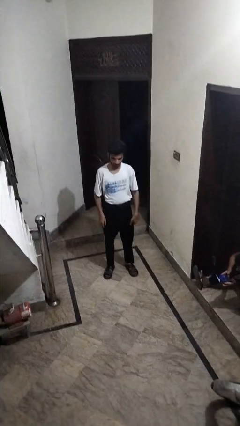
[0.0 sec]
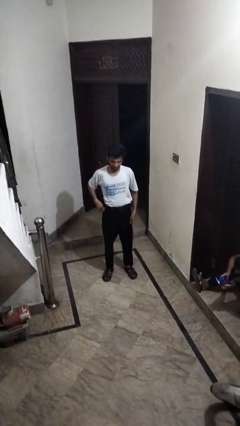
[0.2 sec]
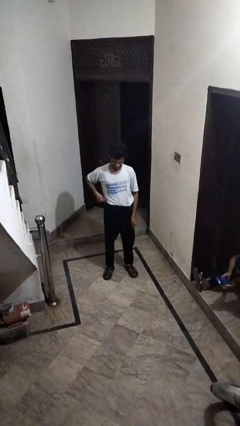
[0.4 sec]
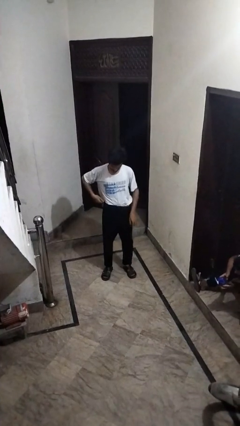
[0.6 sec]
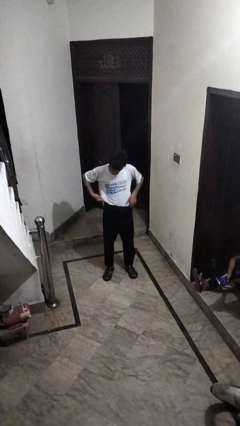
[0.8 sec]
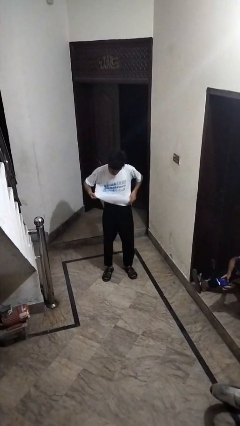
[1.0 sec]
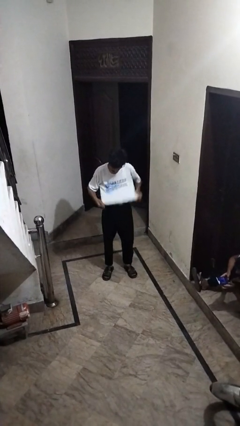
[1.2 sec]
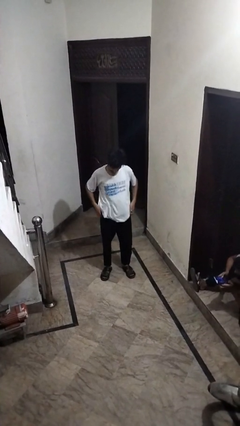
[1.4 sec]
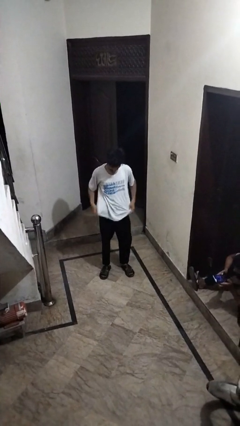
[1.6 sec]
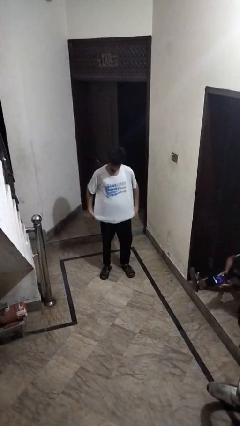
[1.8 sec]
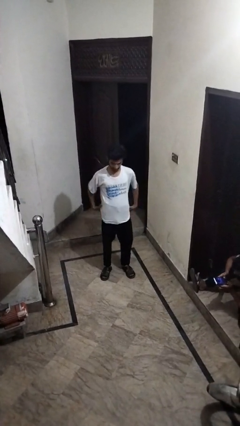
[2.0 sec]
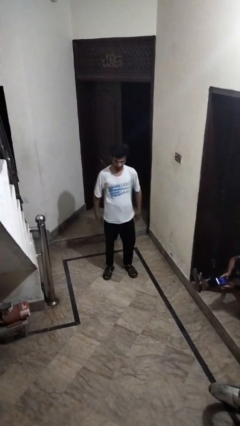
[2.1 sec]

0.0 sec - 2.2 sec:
person untucks shirt

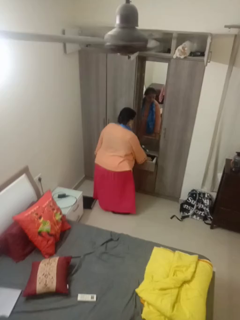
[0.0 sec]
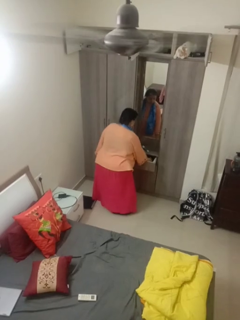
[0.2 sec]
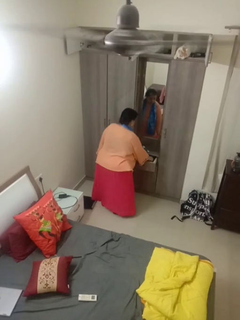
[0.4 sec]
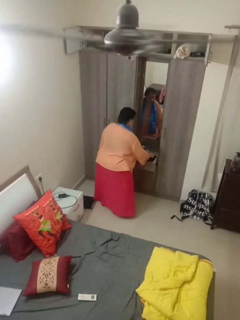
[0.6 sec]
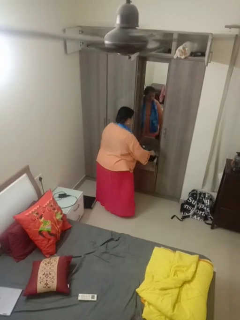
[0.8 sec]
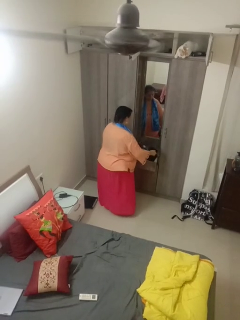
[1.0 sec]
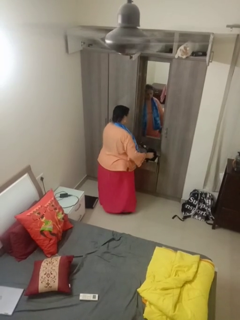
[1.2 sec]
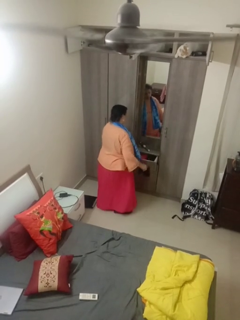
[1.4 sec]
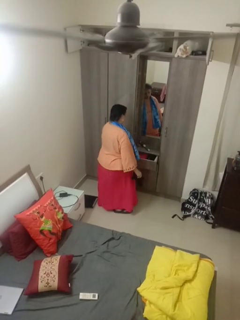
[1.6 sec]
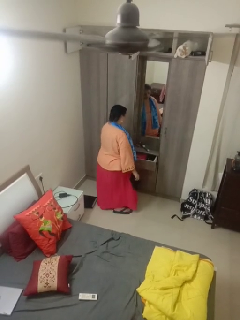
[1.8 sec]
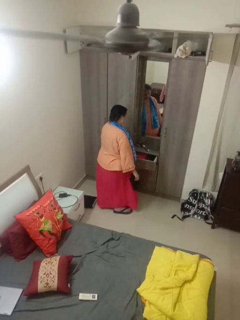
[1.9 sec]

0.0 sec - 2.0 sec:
person takes clothes from dresser

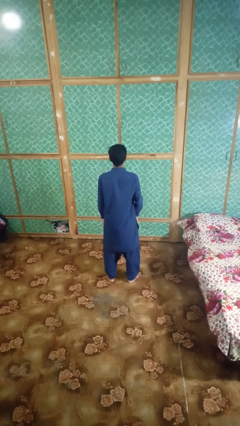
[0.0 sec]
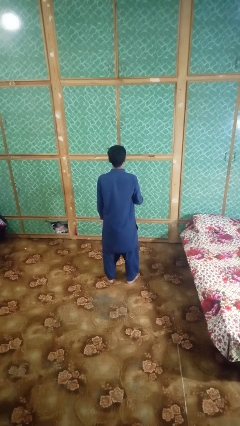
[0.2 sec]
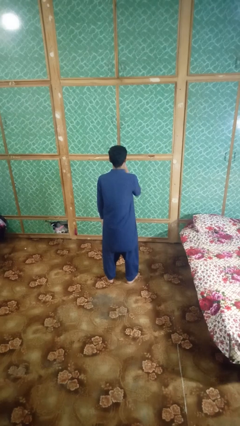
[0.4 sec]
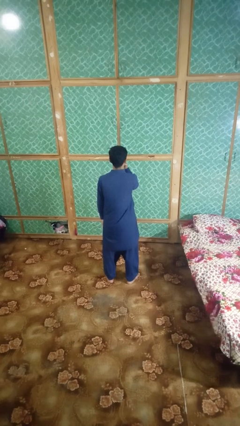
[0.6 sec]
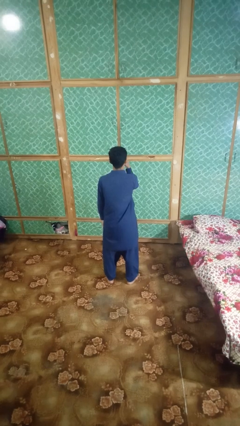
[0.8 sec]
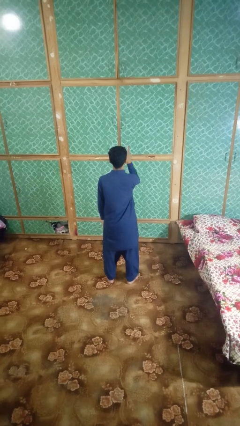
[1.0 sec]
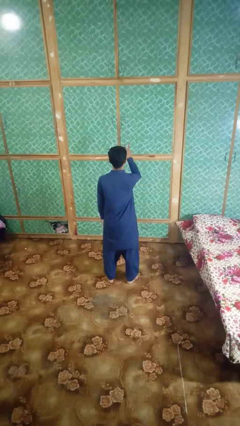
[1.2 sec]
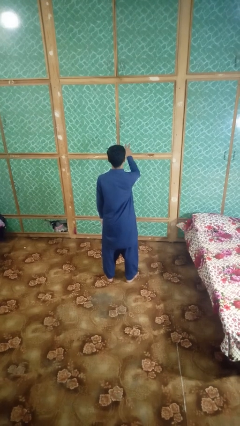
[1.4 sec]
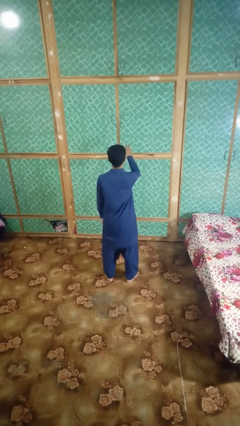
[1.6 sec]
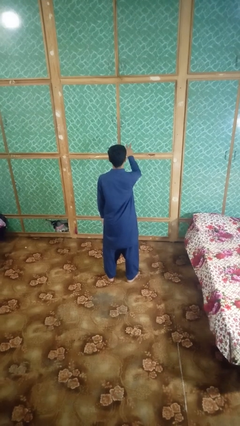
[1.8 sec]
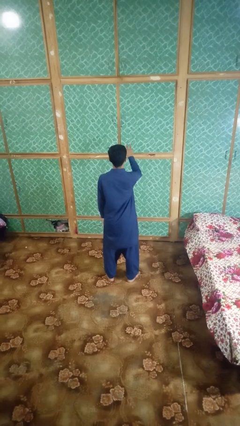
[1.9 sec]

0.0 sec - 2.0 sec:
person gestures watch closely

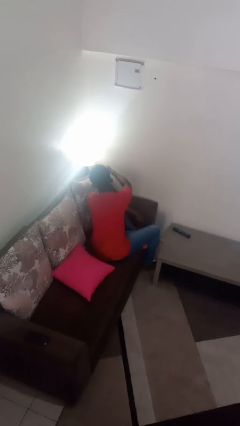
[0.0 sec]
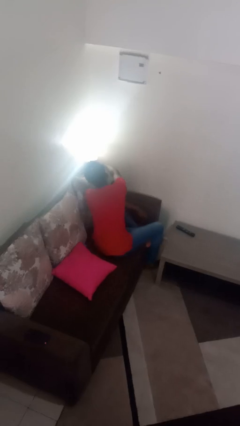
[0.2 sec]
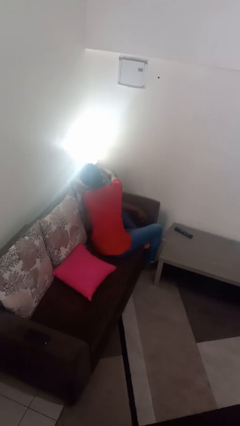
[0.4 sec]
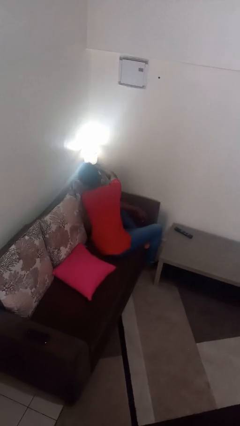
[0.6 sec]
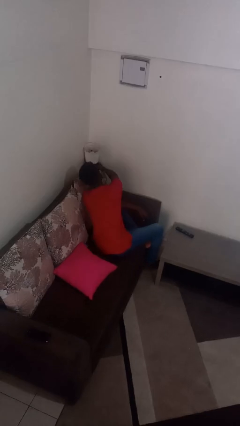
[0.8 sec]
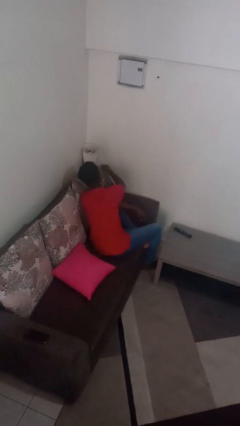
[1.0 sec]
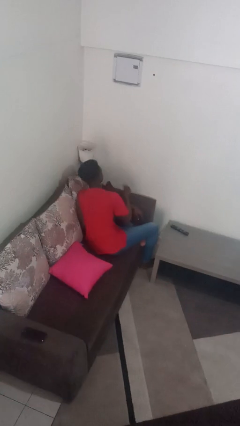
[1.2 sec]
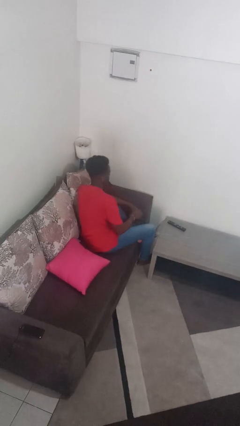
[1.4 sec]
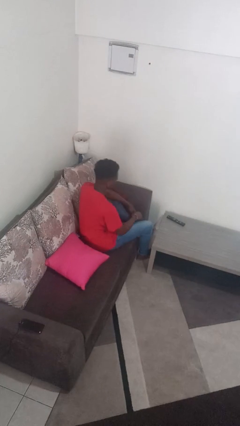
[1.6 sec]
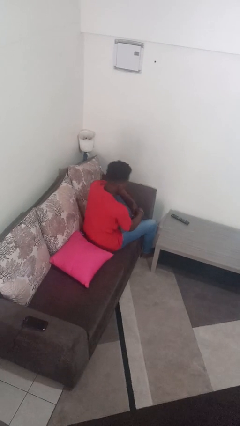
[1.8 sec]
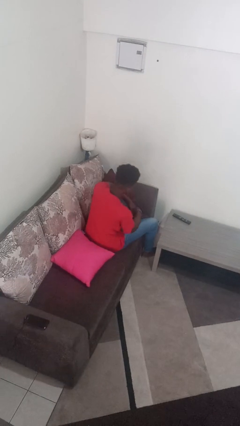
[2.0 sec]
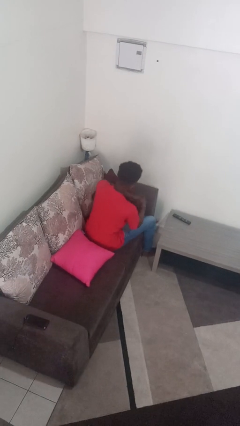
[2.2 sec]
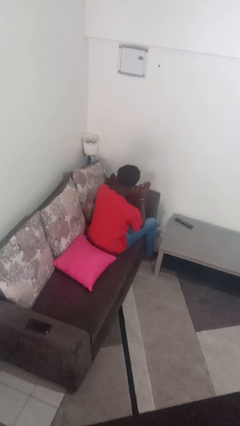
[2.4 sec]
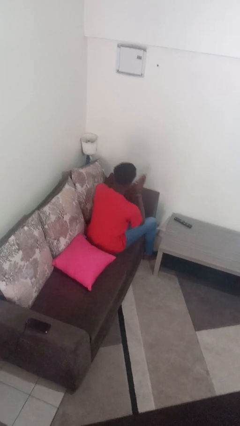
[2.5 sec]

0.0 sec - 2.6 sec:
person turns off lamp

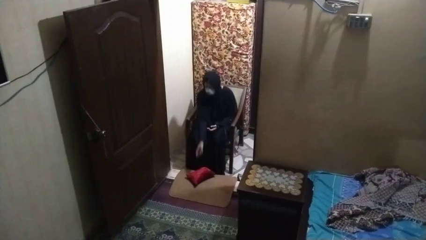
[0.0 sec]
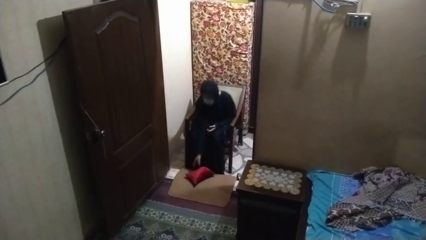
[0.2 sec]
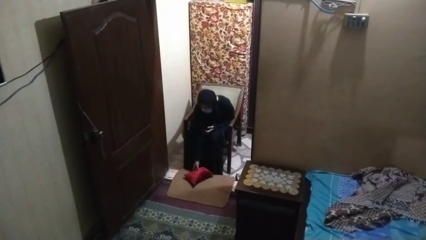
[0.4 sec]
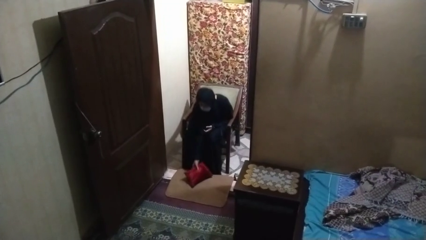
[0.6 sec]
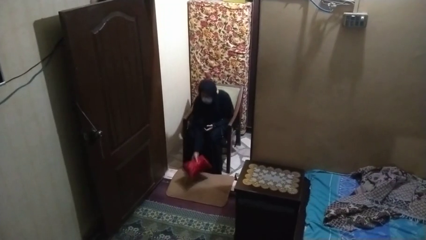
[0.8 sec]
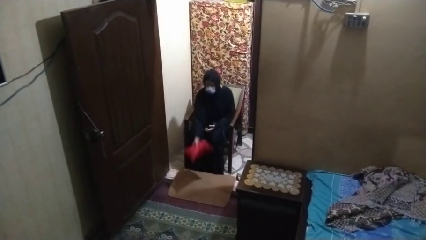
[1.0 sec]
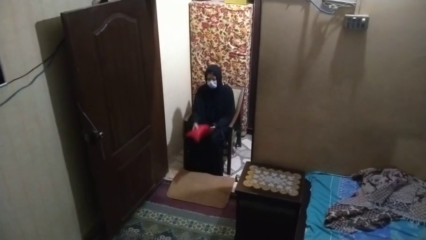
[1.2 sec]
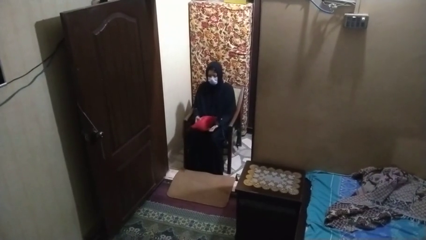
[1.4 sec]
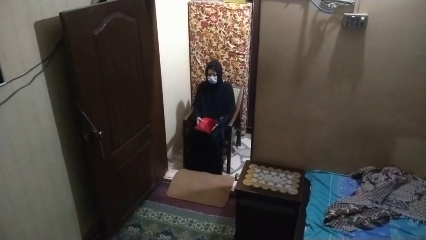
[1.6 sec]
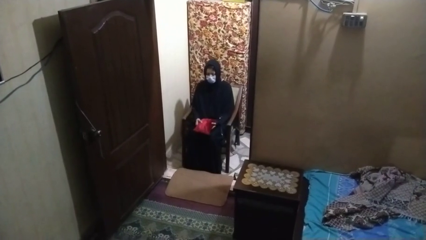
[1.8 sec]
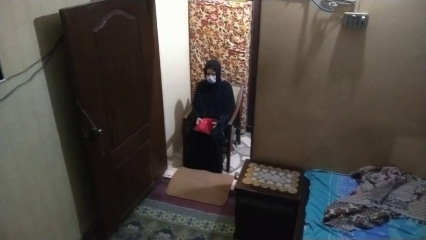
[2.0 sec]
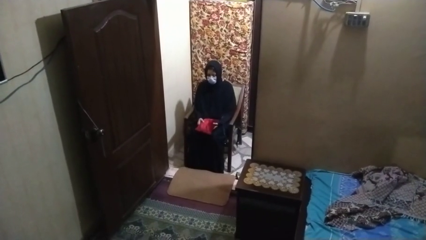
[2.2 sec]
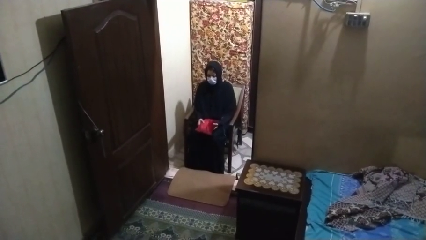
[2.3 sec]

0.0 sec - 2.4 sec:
person picks up object from floor

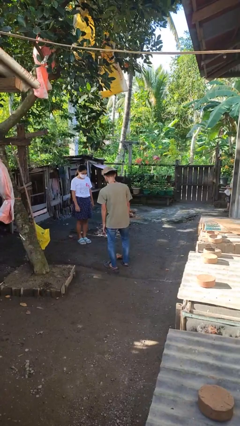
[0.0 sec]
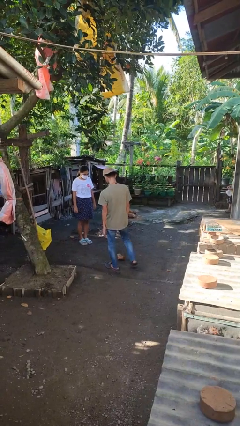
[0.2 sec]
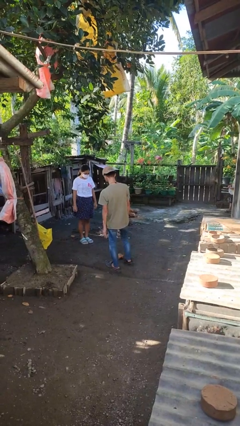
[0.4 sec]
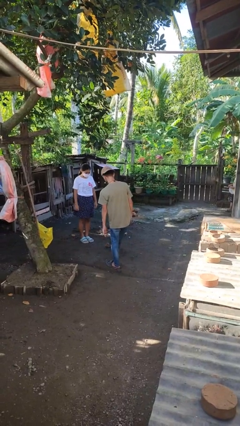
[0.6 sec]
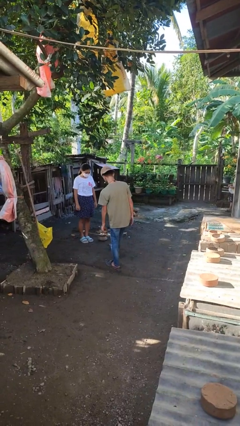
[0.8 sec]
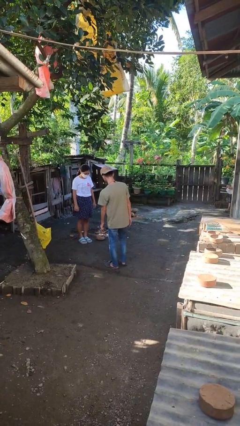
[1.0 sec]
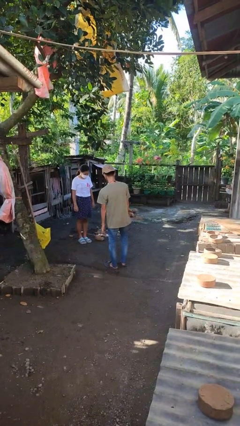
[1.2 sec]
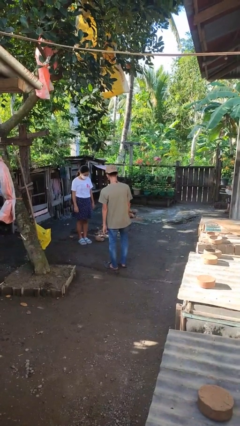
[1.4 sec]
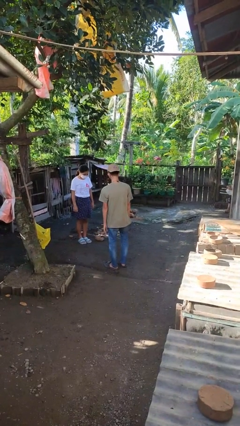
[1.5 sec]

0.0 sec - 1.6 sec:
person kicks object to person

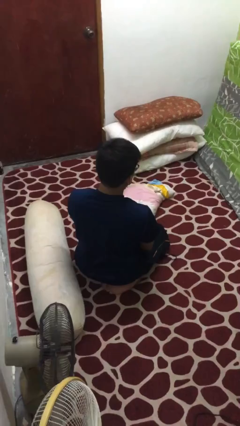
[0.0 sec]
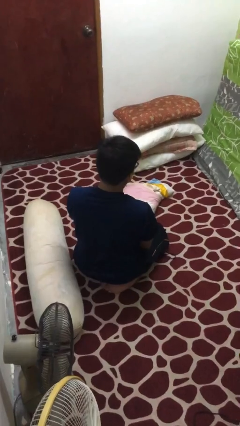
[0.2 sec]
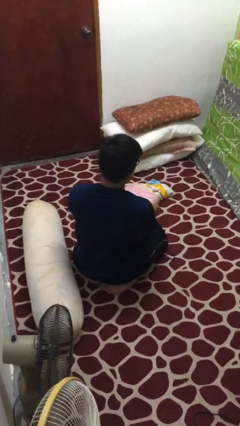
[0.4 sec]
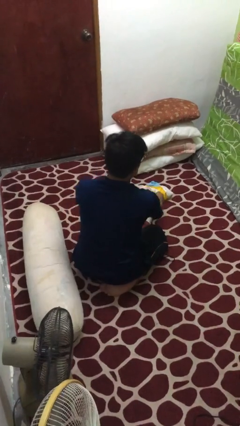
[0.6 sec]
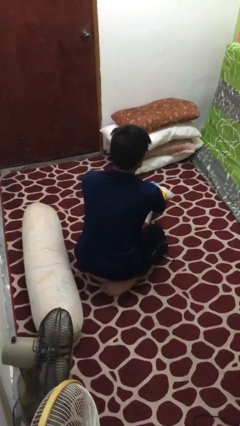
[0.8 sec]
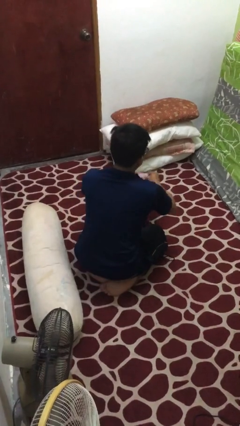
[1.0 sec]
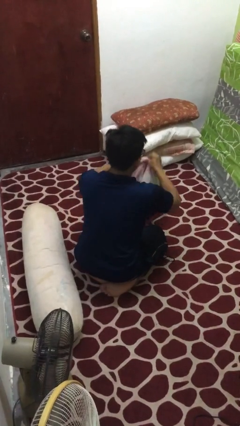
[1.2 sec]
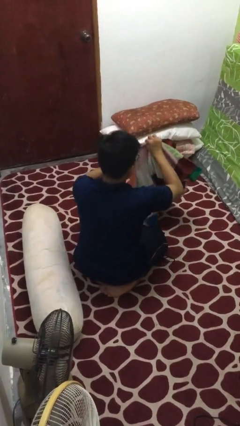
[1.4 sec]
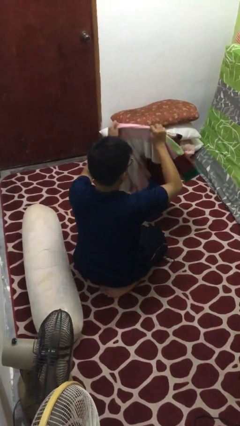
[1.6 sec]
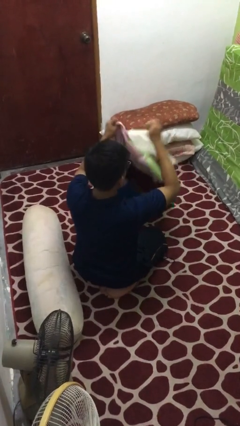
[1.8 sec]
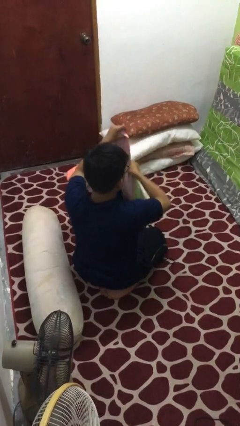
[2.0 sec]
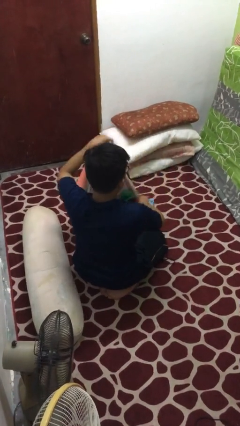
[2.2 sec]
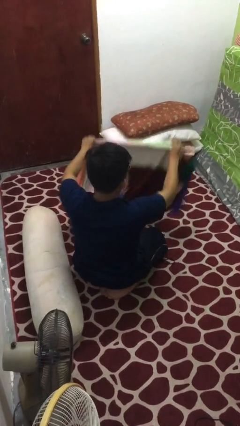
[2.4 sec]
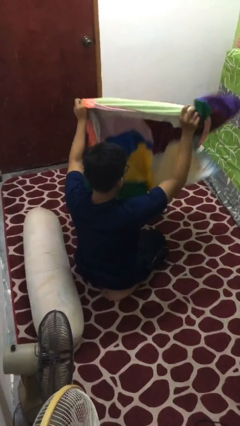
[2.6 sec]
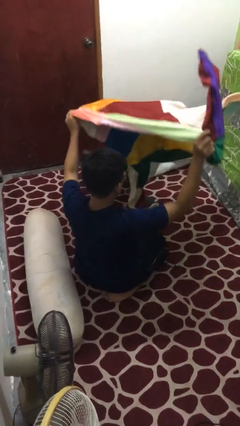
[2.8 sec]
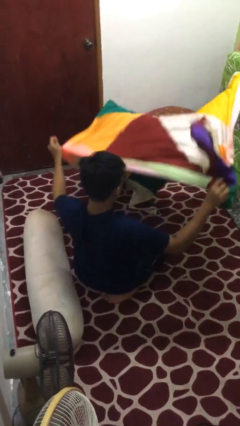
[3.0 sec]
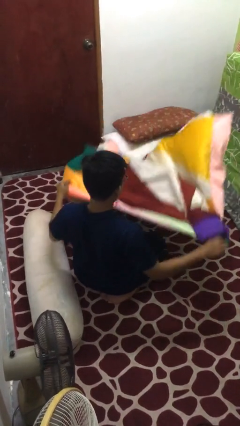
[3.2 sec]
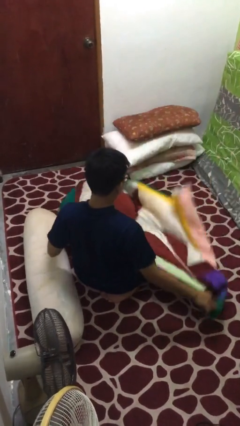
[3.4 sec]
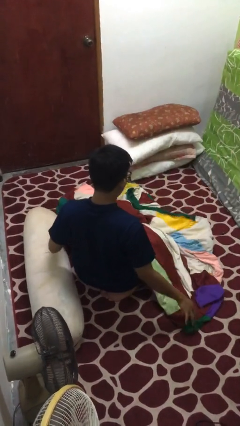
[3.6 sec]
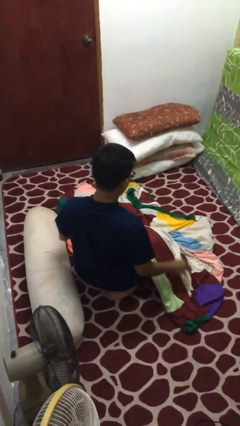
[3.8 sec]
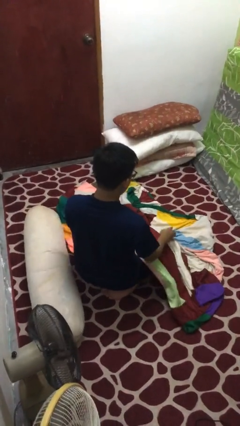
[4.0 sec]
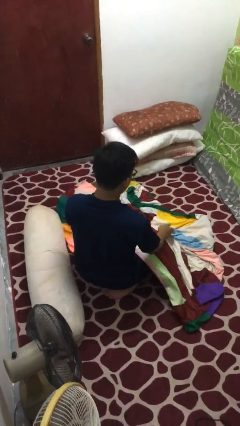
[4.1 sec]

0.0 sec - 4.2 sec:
person unfolds blanket

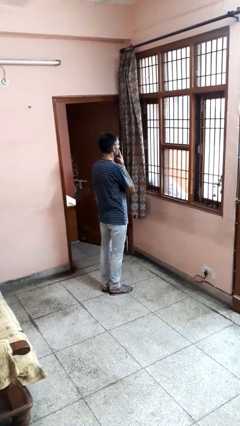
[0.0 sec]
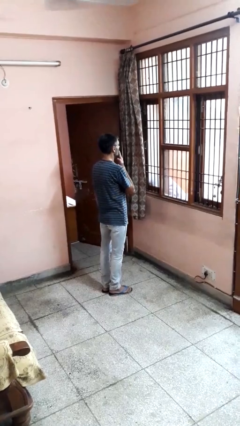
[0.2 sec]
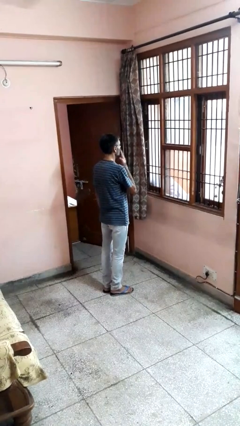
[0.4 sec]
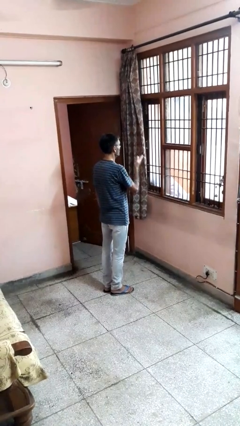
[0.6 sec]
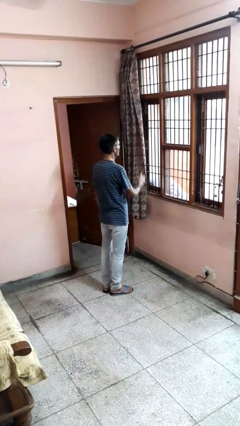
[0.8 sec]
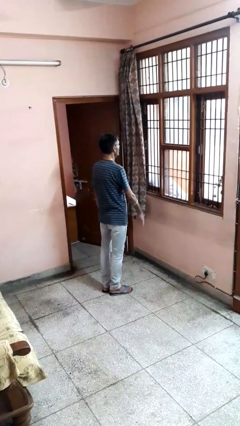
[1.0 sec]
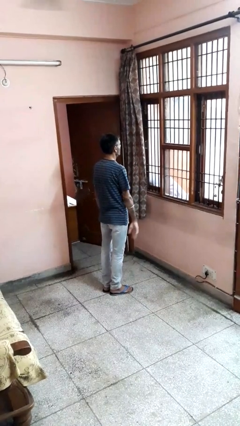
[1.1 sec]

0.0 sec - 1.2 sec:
person gestures blow kiss
